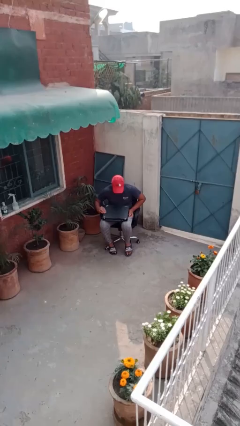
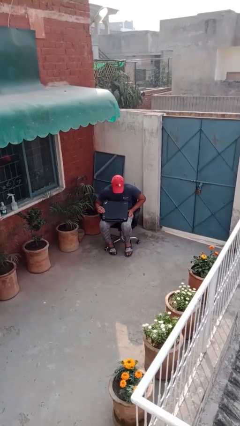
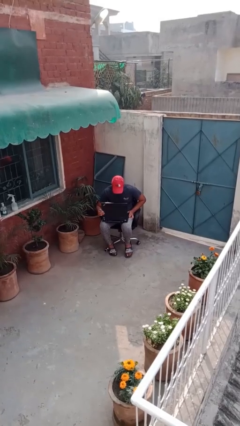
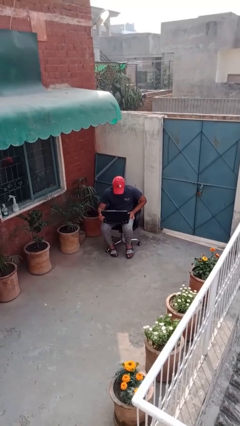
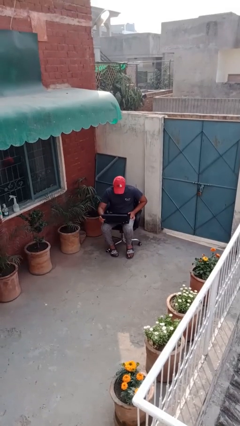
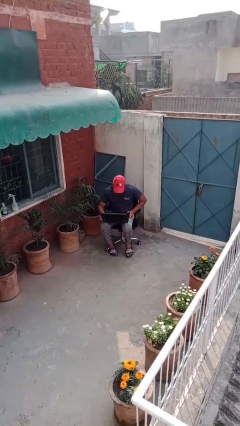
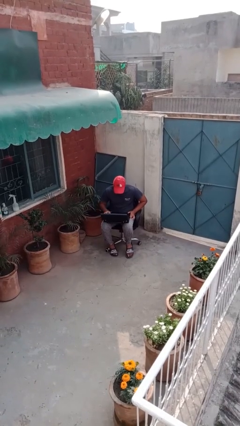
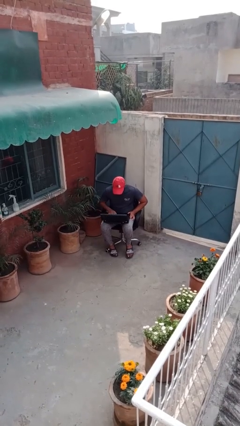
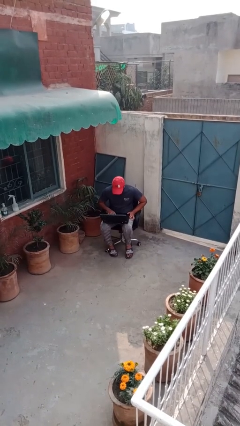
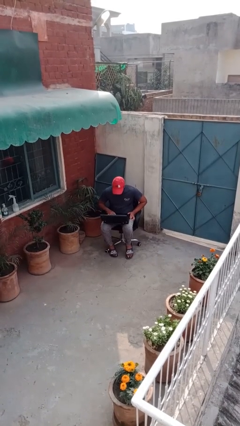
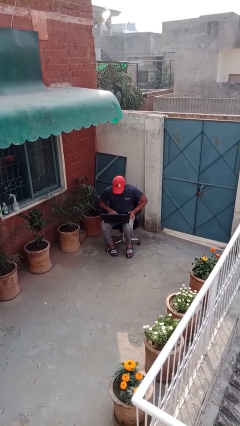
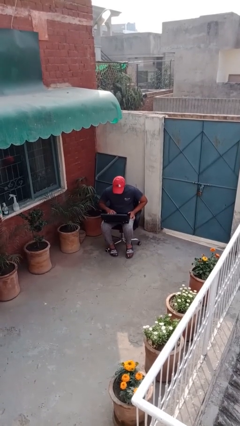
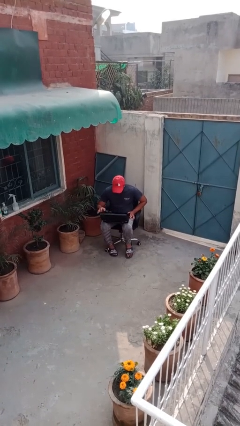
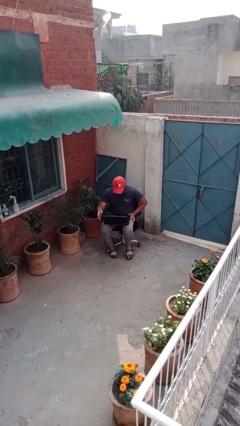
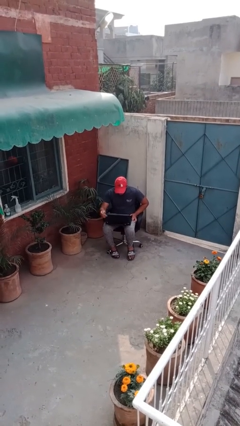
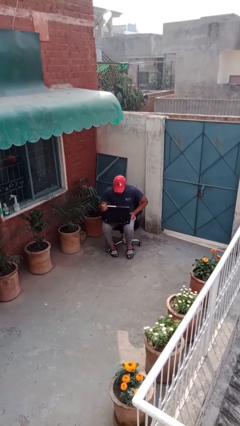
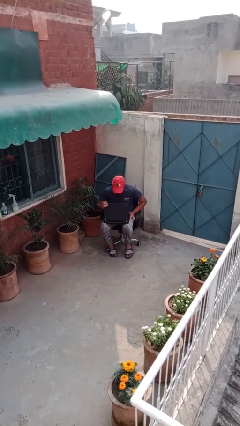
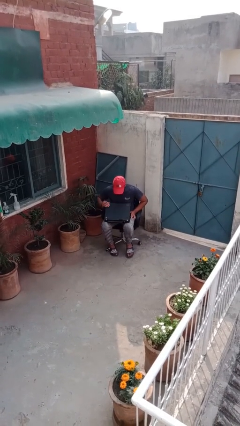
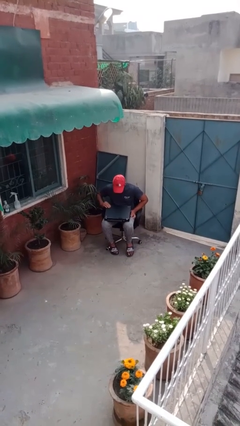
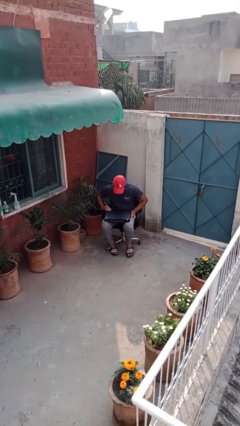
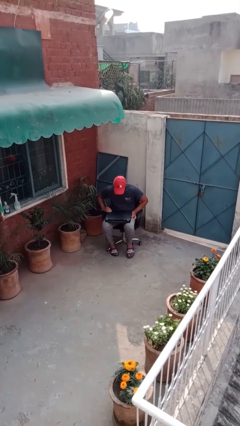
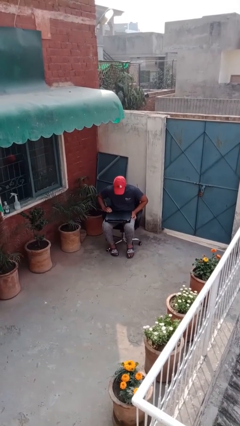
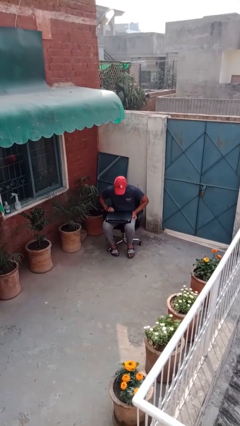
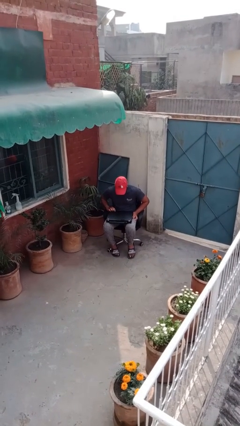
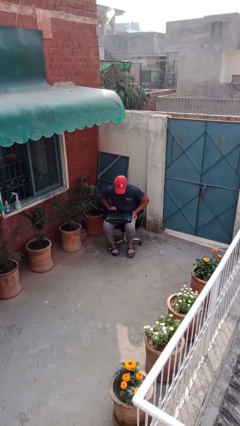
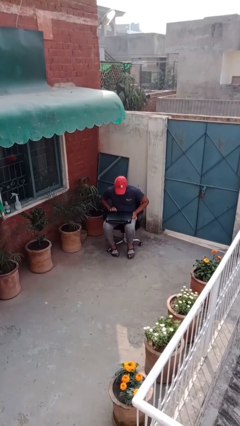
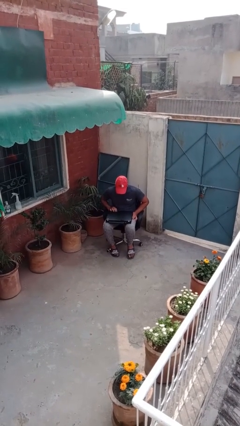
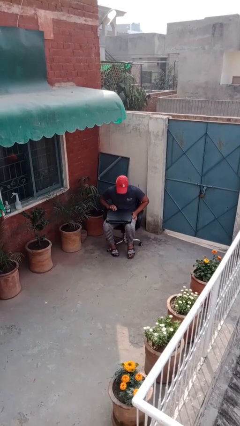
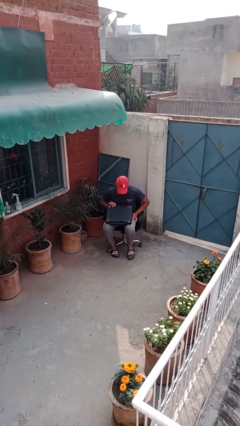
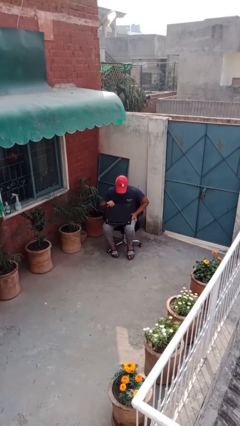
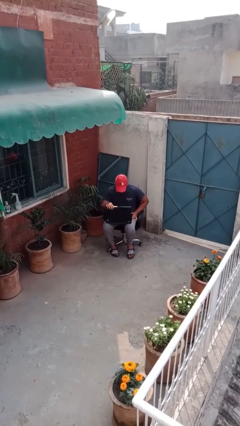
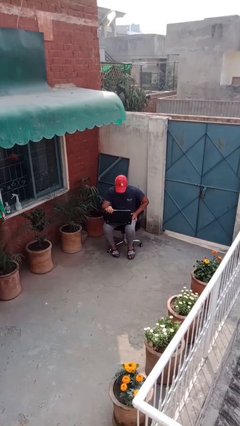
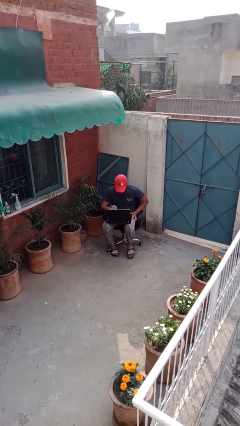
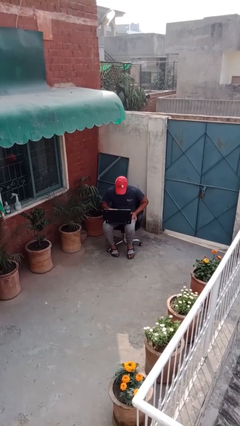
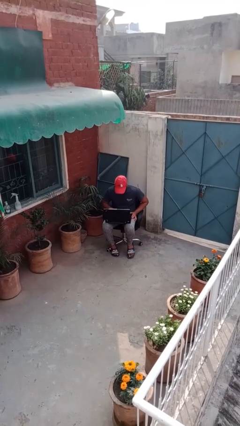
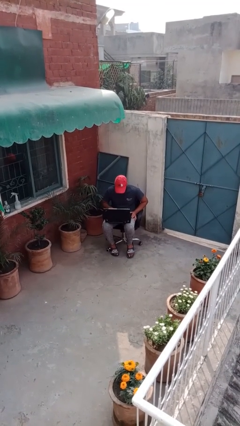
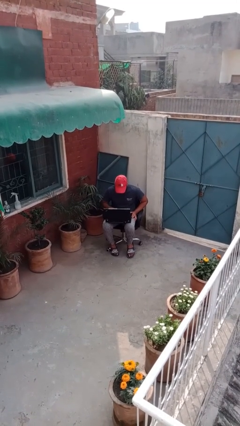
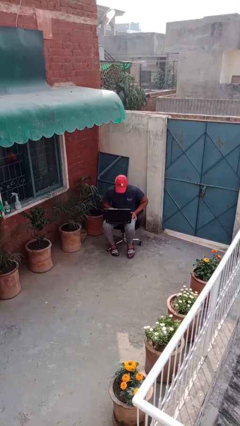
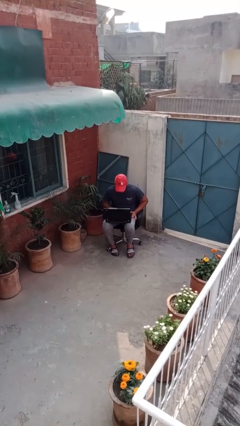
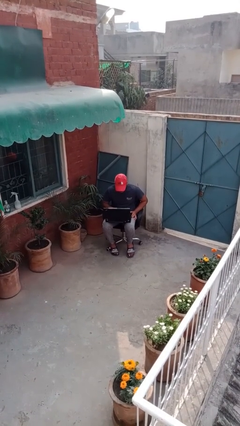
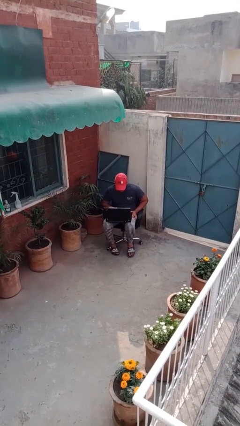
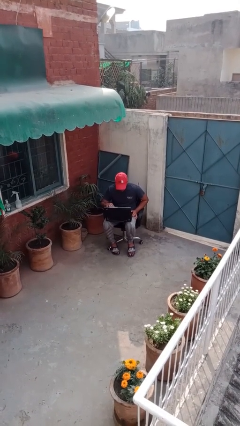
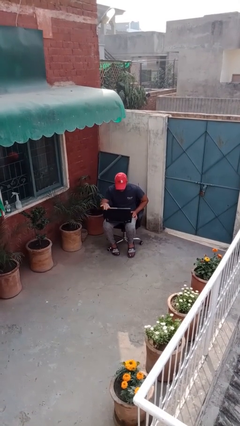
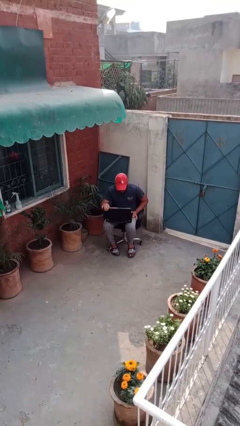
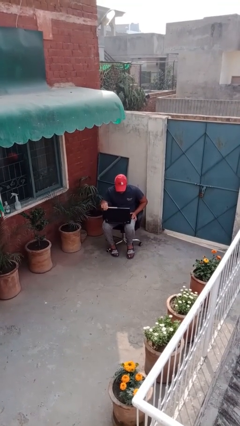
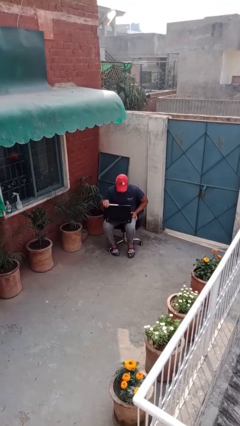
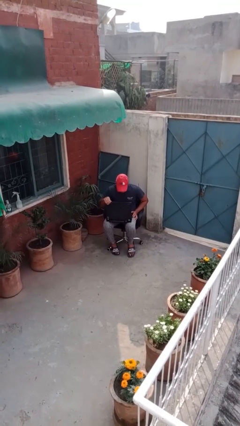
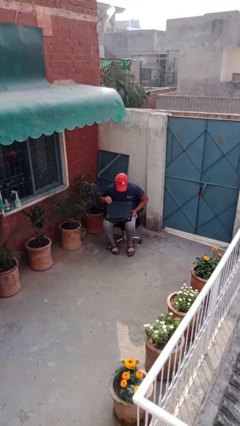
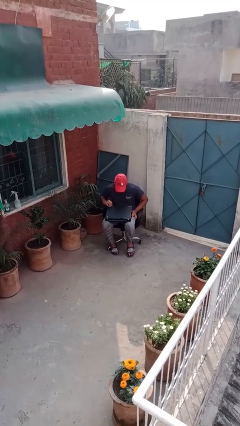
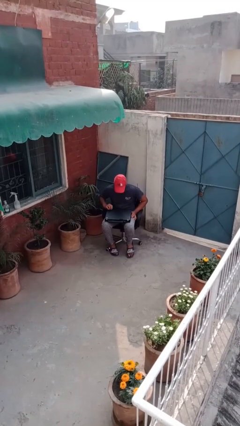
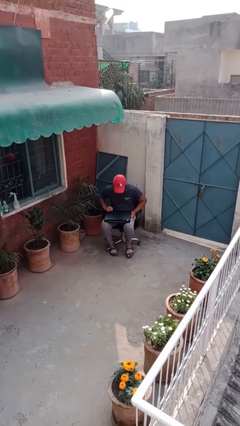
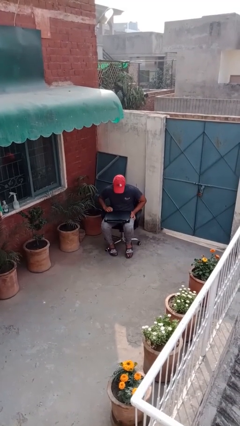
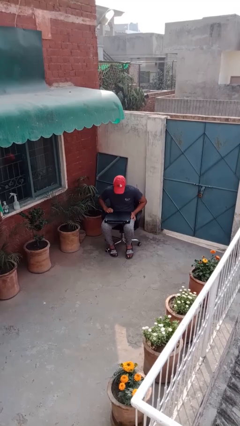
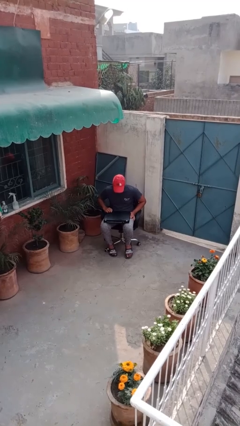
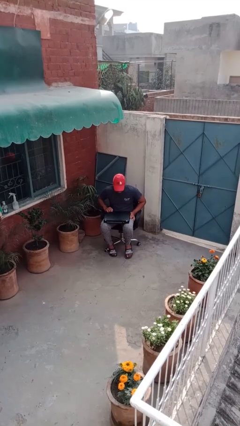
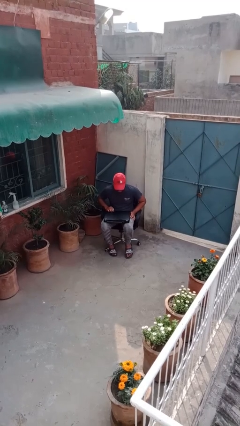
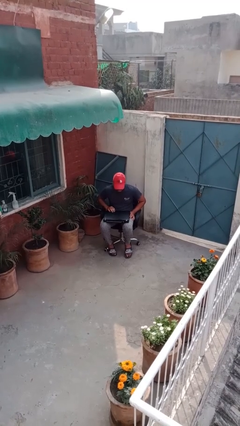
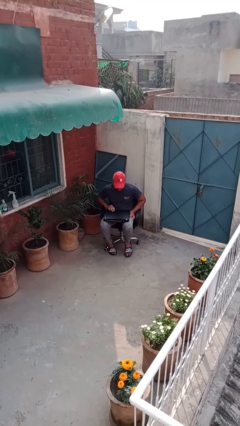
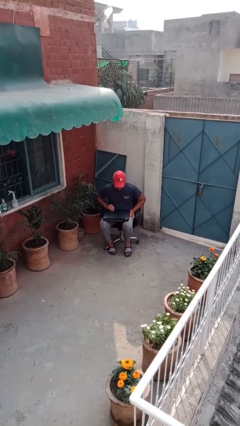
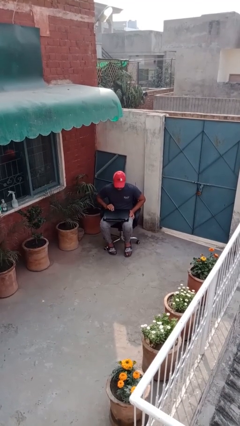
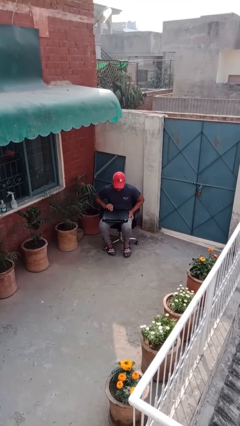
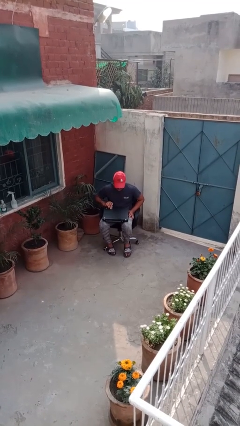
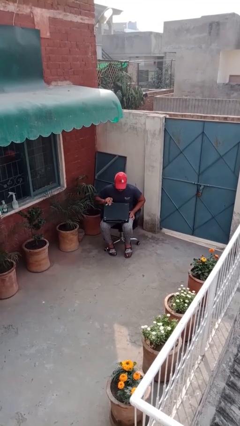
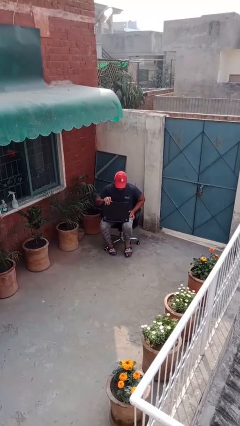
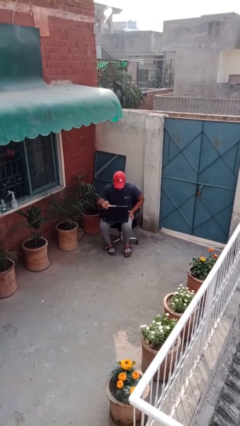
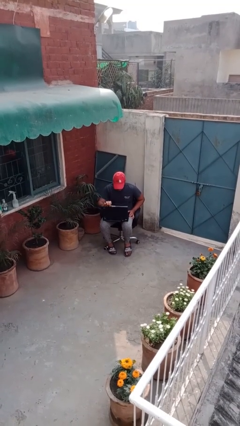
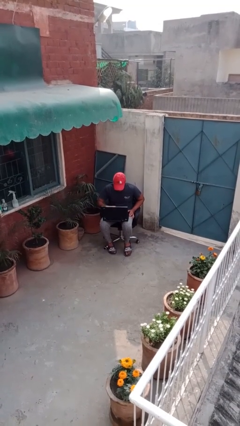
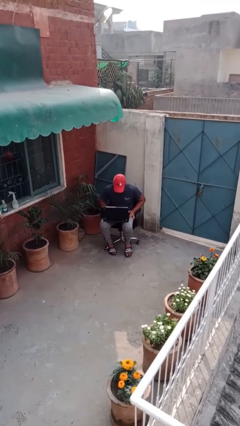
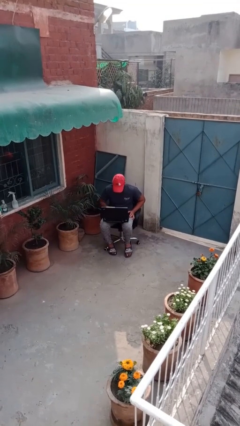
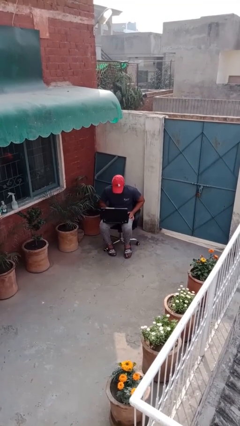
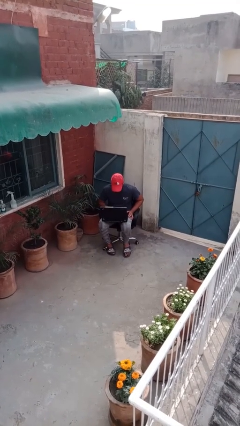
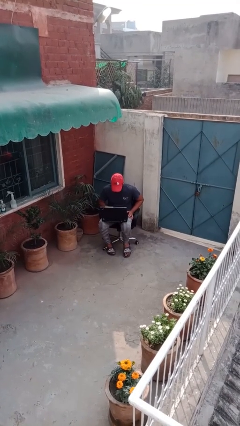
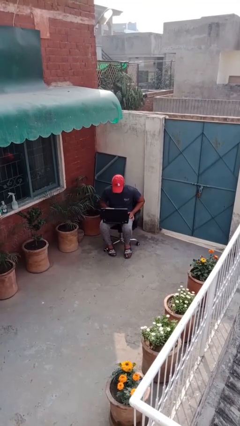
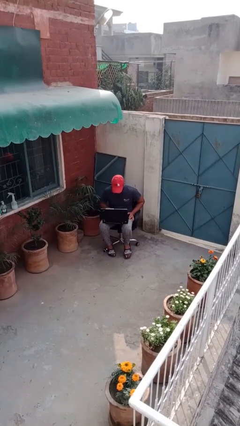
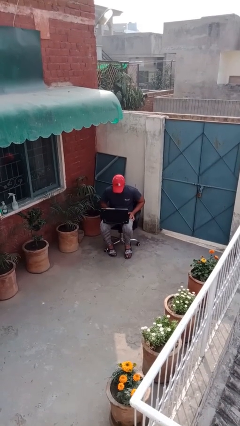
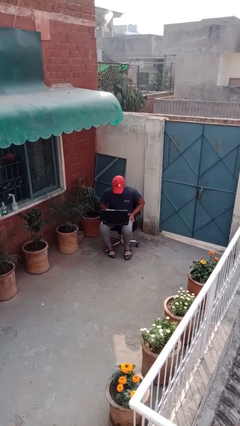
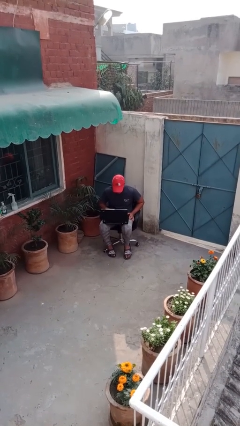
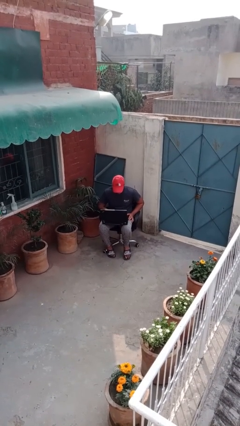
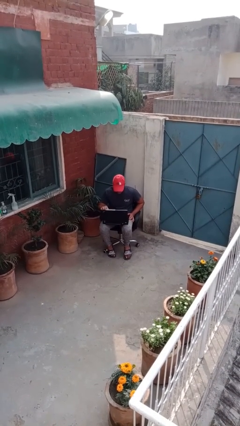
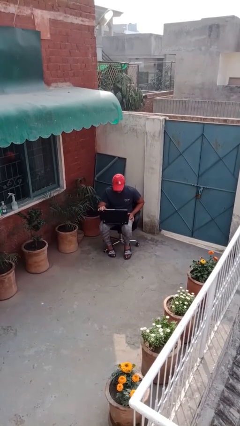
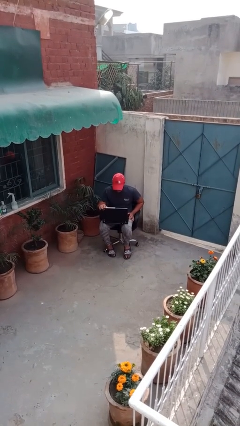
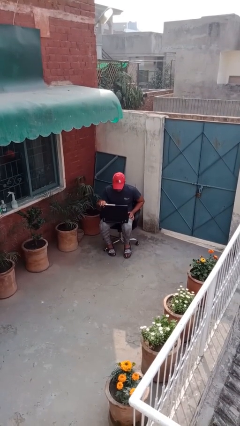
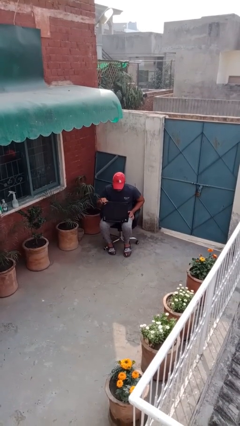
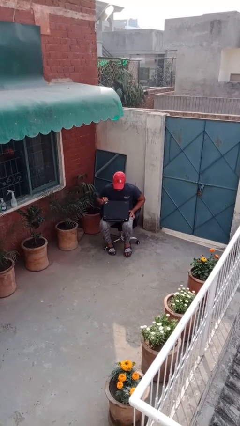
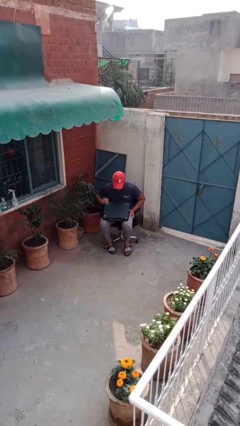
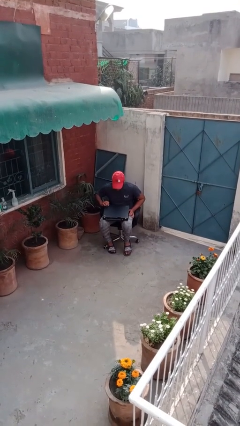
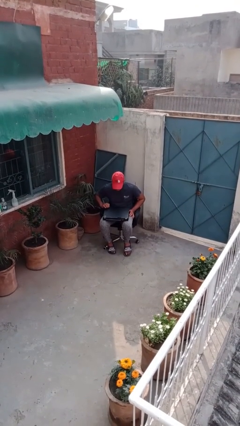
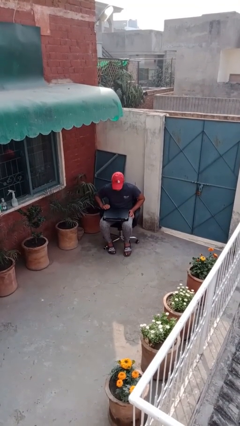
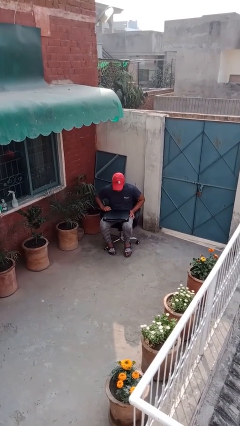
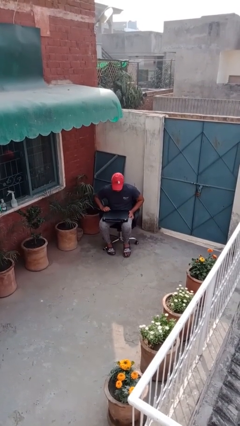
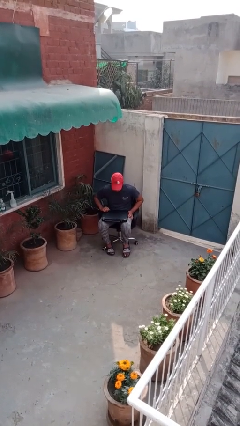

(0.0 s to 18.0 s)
person interacts with laptop

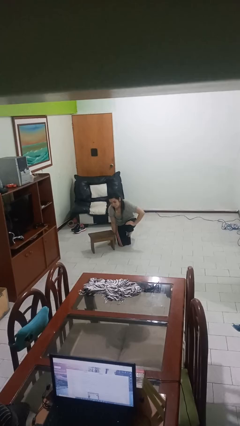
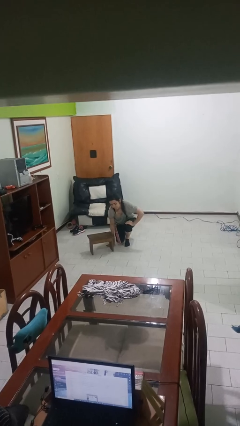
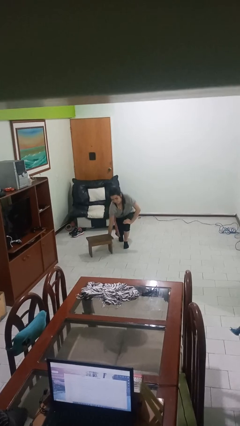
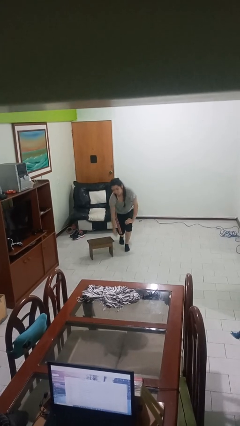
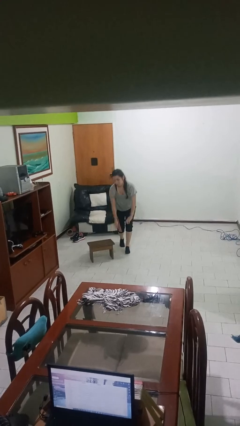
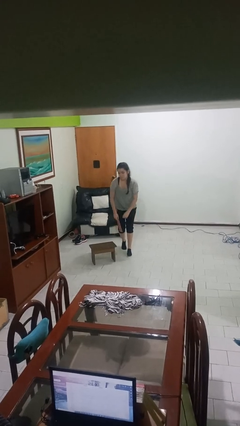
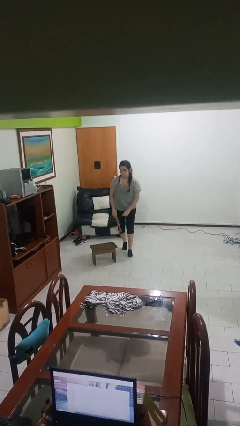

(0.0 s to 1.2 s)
person stands up from floor
